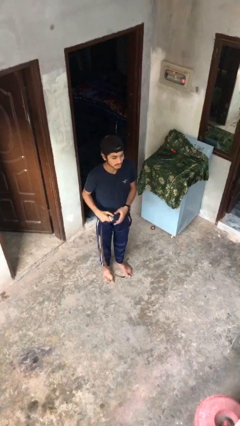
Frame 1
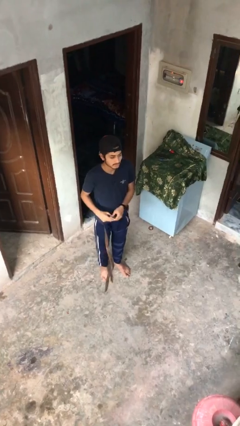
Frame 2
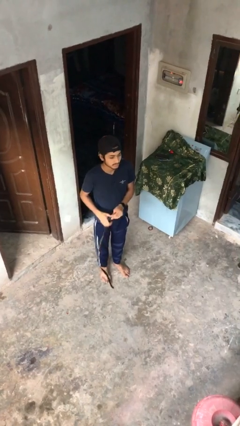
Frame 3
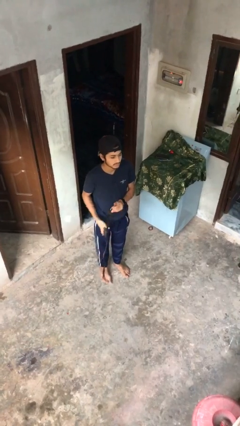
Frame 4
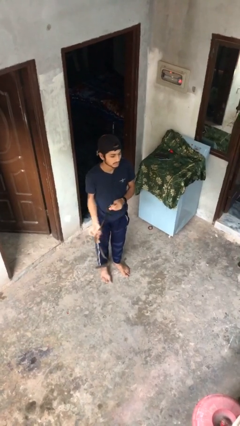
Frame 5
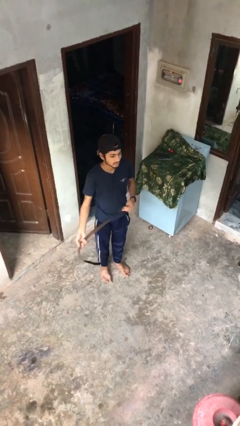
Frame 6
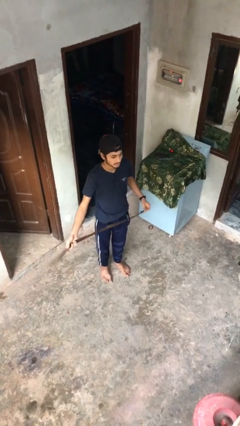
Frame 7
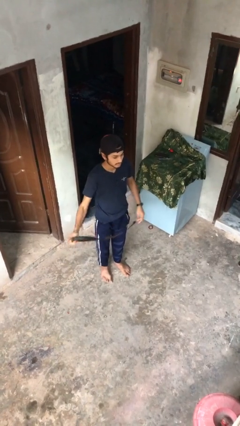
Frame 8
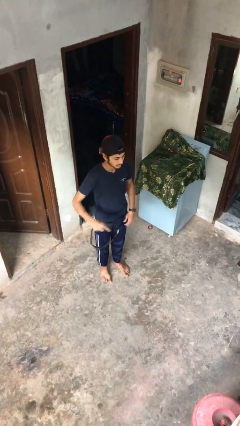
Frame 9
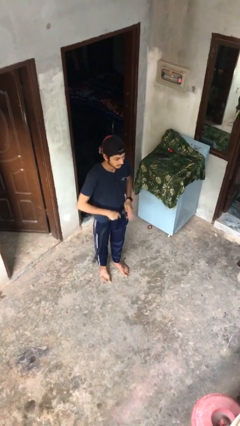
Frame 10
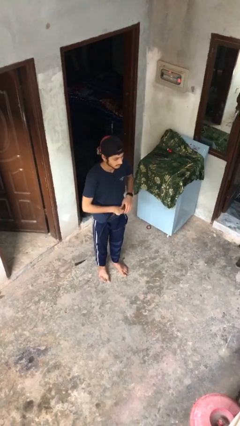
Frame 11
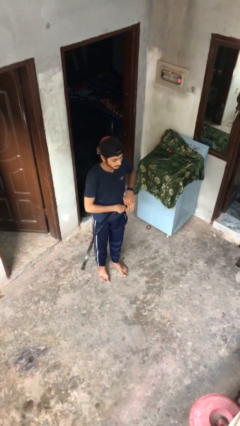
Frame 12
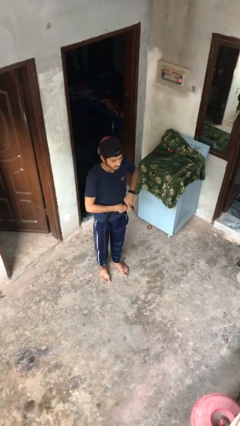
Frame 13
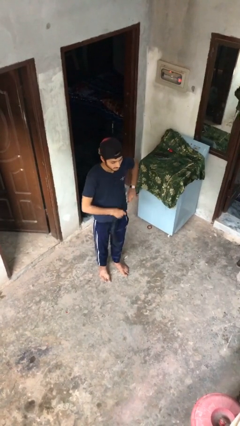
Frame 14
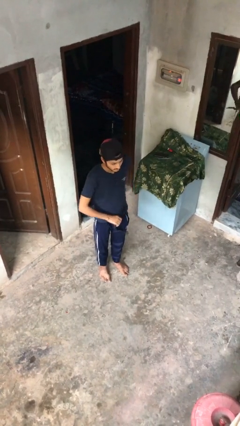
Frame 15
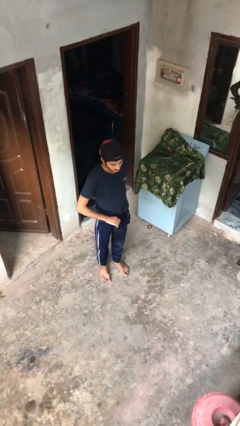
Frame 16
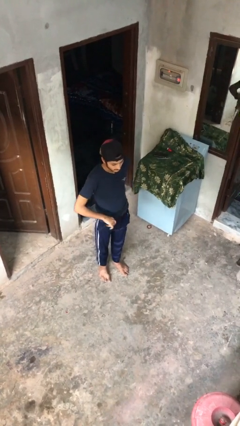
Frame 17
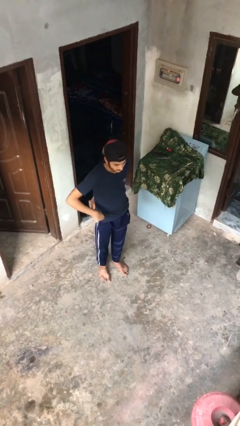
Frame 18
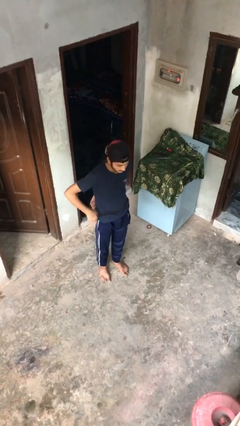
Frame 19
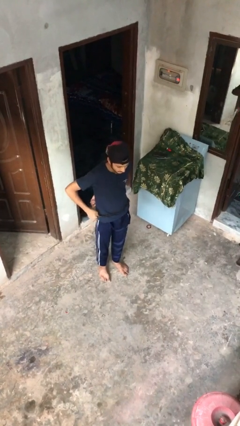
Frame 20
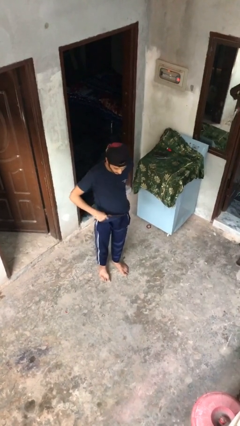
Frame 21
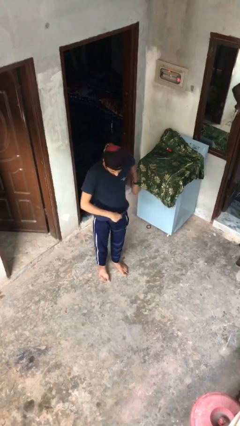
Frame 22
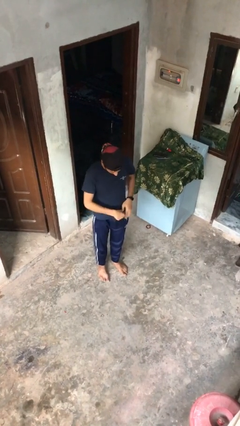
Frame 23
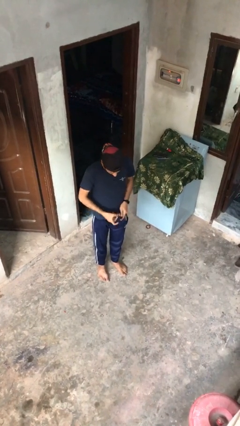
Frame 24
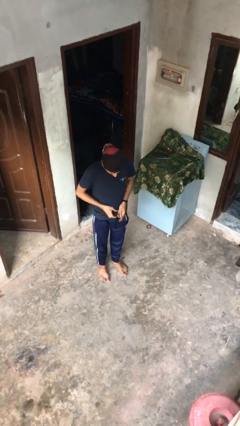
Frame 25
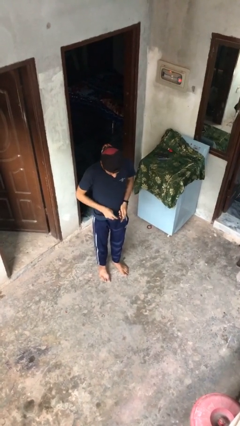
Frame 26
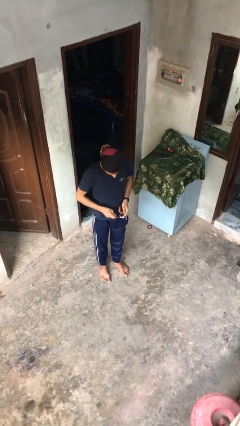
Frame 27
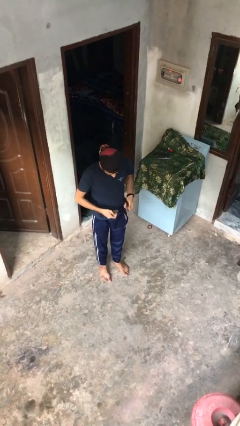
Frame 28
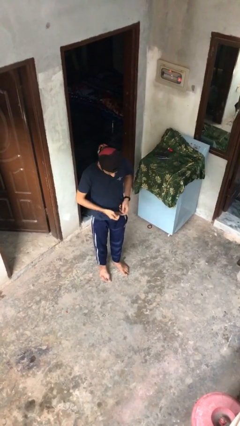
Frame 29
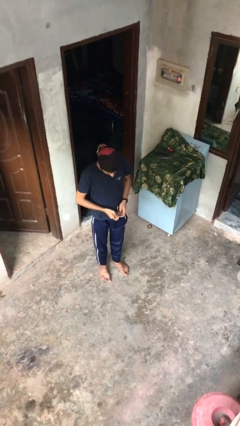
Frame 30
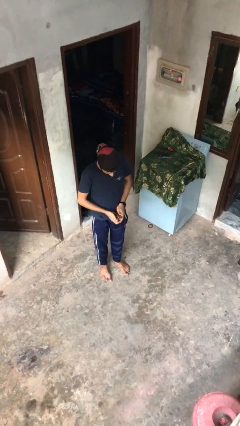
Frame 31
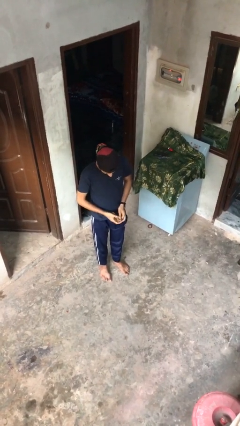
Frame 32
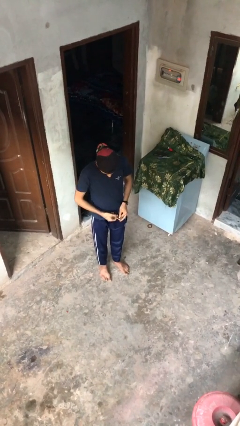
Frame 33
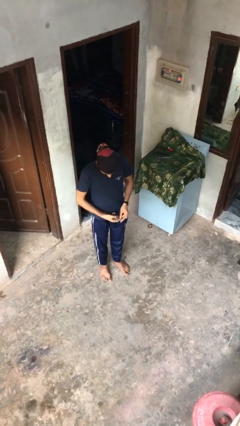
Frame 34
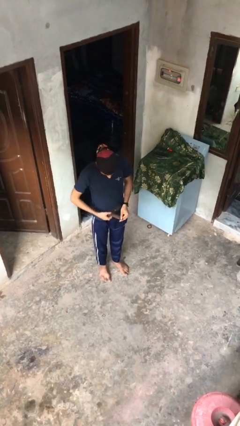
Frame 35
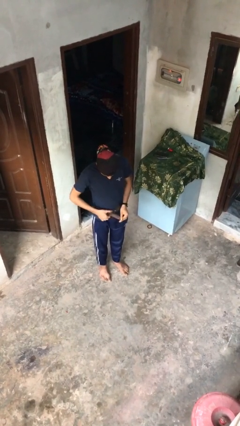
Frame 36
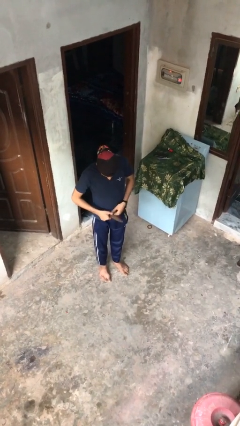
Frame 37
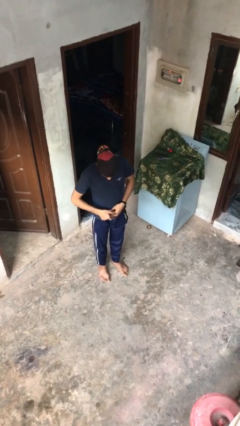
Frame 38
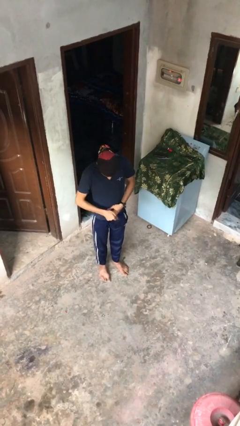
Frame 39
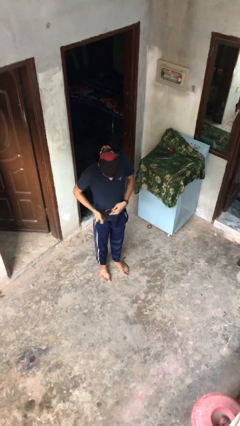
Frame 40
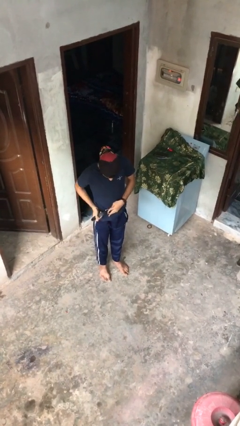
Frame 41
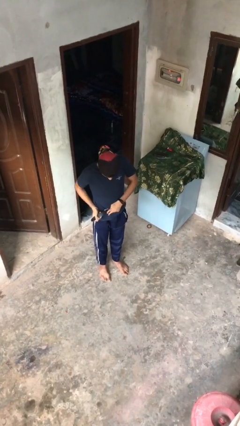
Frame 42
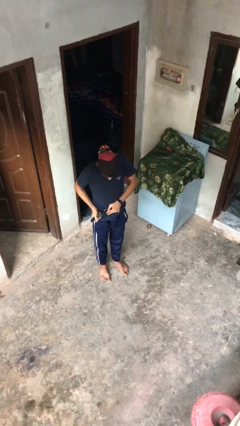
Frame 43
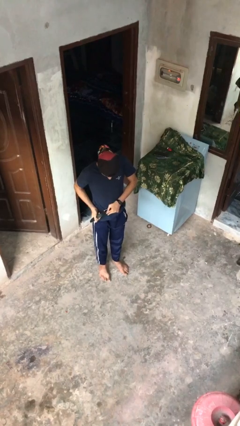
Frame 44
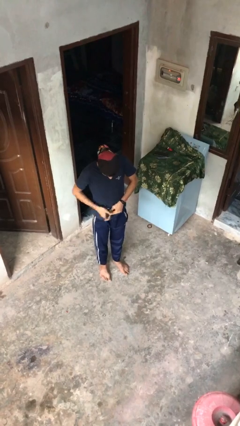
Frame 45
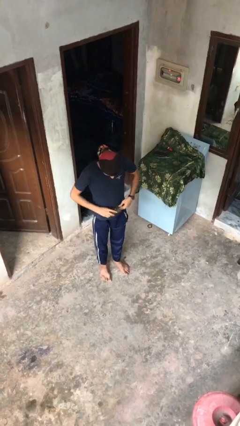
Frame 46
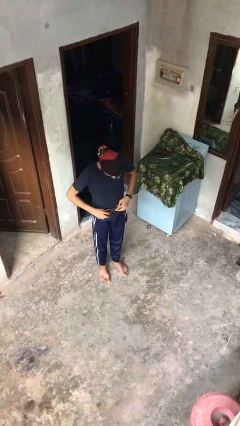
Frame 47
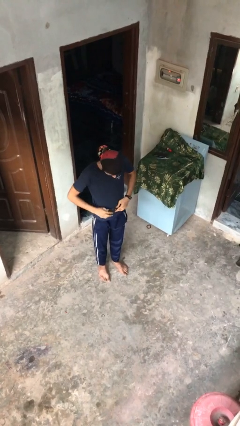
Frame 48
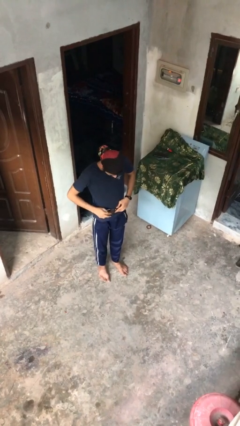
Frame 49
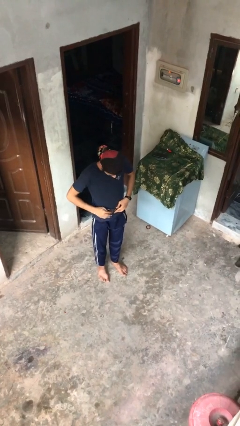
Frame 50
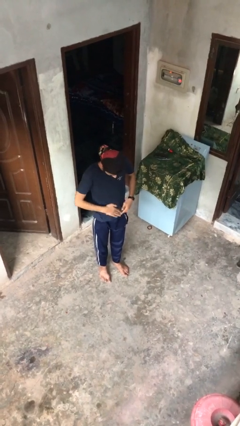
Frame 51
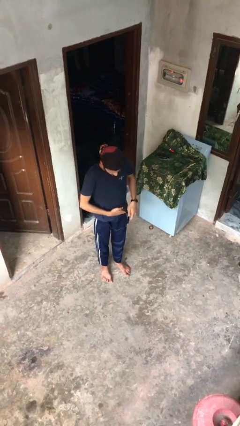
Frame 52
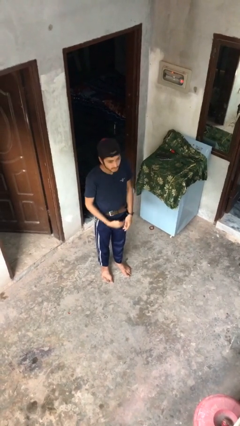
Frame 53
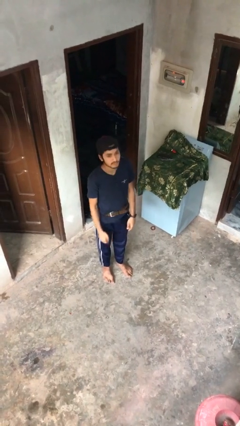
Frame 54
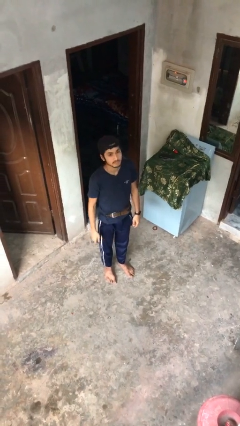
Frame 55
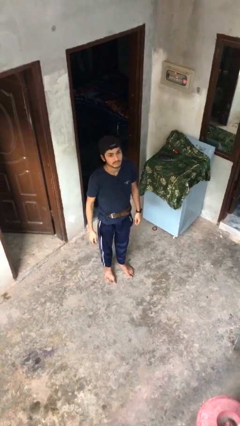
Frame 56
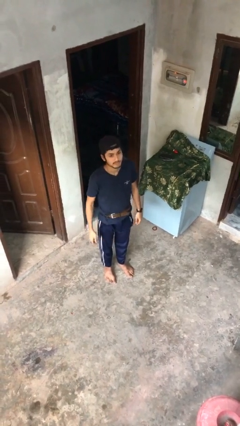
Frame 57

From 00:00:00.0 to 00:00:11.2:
person puts on belt

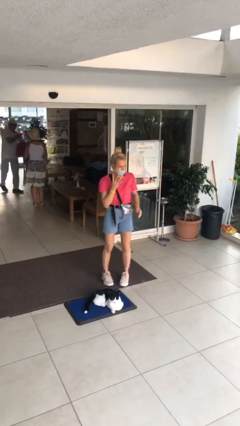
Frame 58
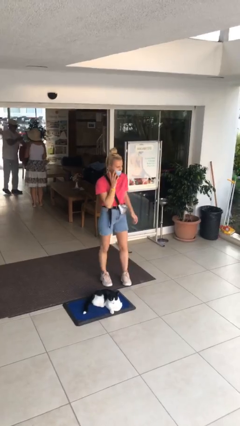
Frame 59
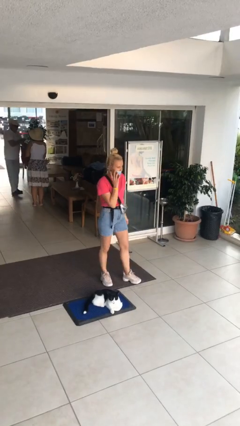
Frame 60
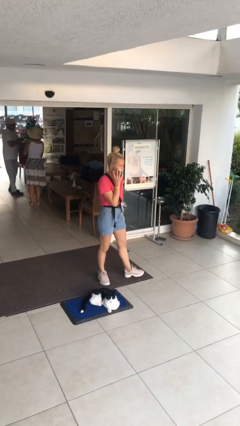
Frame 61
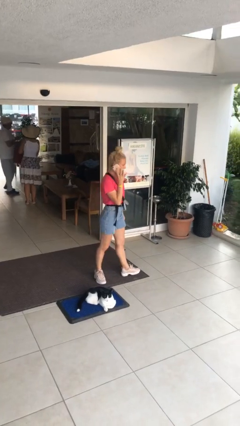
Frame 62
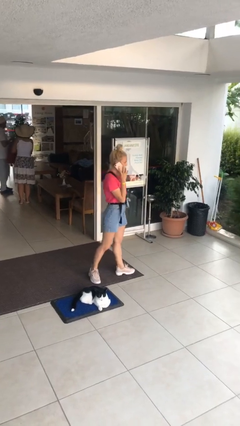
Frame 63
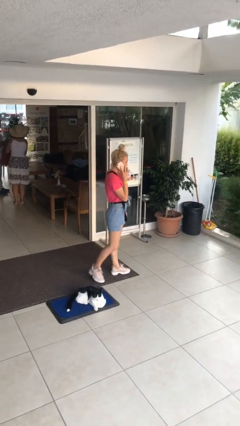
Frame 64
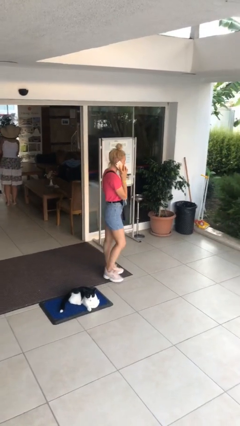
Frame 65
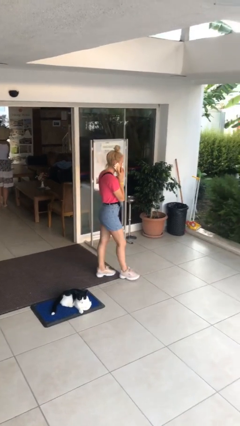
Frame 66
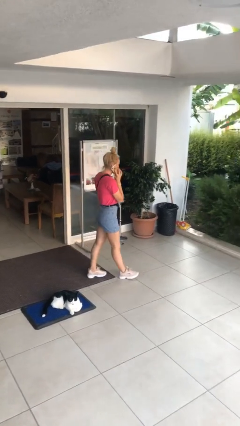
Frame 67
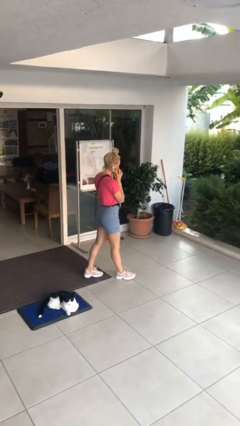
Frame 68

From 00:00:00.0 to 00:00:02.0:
person talks on phone

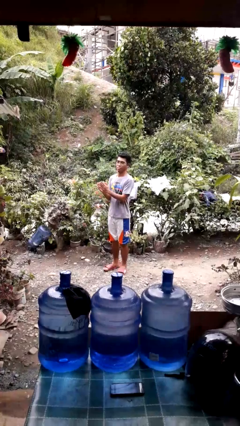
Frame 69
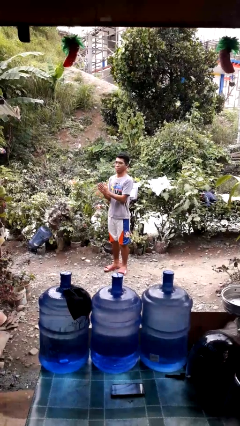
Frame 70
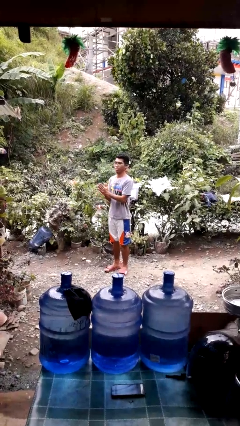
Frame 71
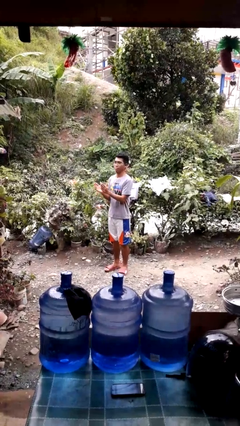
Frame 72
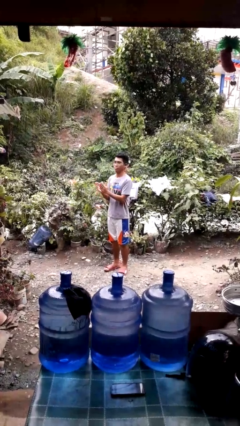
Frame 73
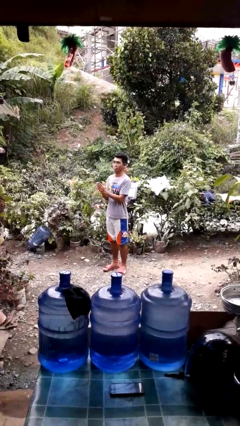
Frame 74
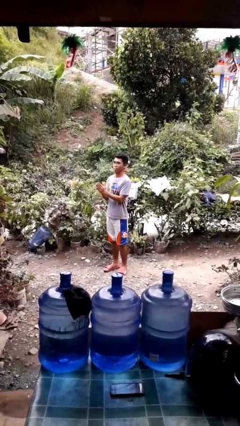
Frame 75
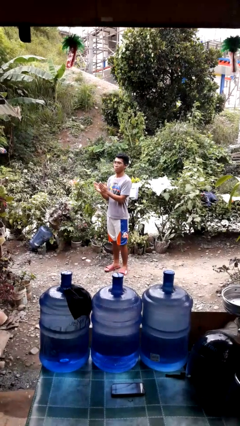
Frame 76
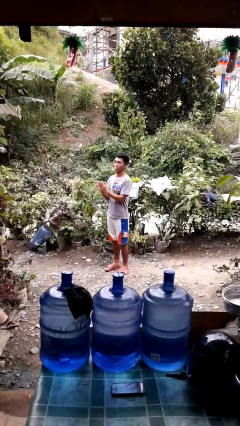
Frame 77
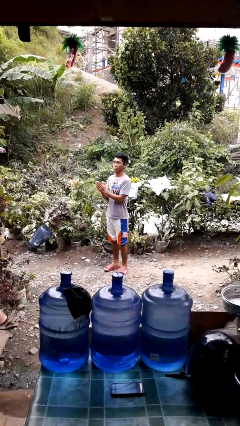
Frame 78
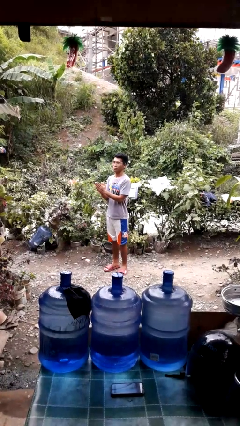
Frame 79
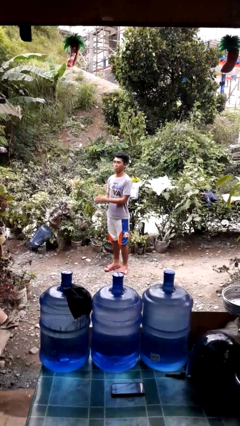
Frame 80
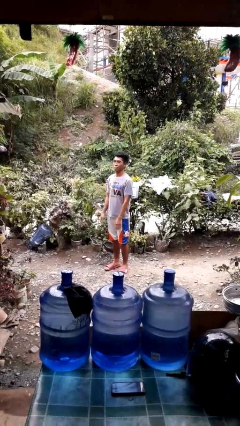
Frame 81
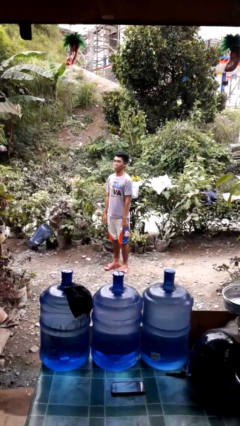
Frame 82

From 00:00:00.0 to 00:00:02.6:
person claps hands

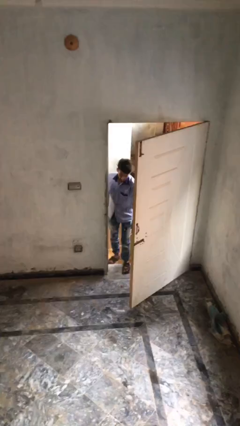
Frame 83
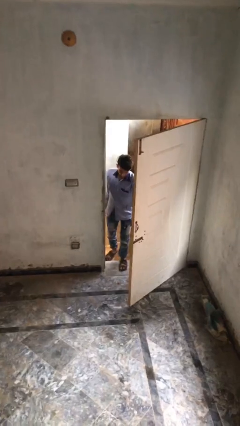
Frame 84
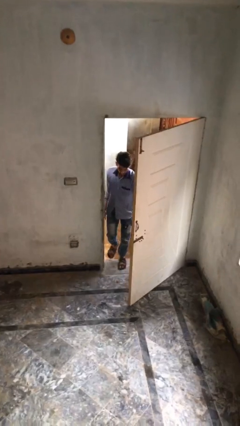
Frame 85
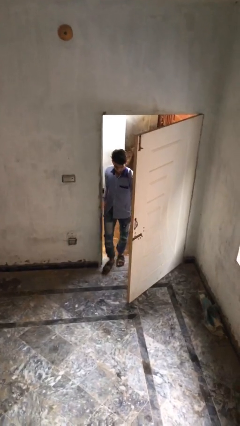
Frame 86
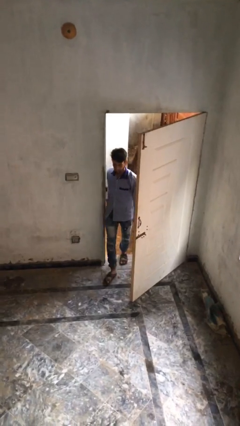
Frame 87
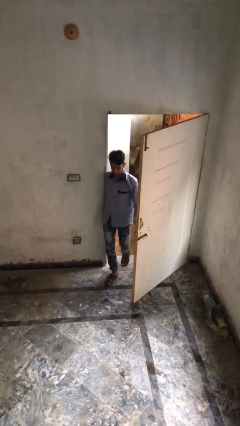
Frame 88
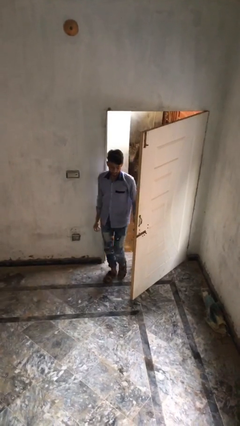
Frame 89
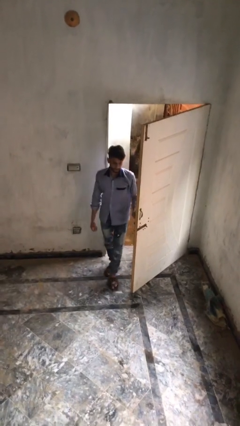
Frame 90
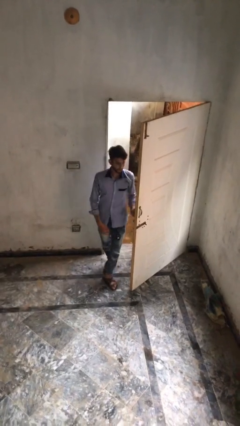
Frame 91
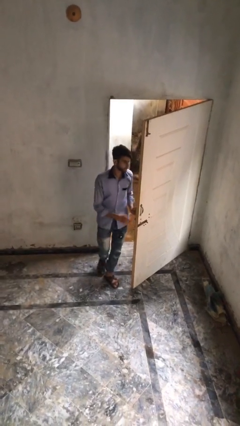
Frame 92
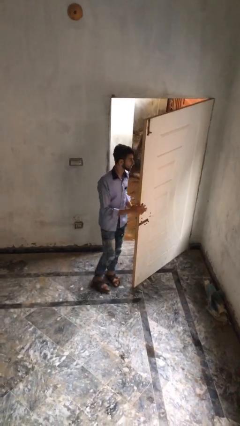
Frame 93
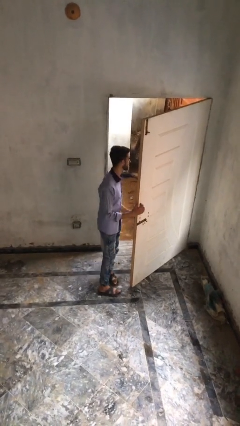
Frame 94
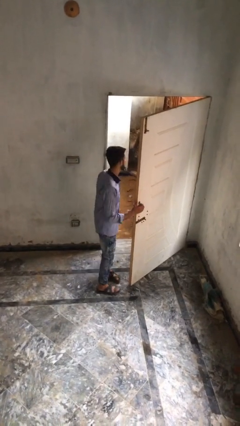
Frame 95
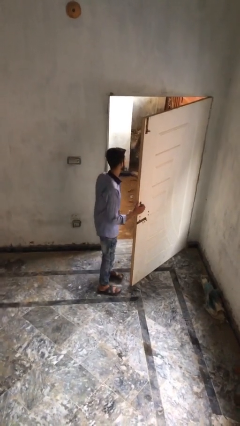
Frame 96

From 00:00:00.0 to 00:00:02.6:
person enters scene through structure
